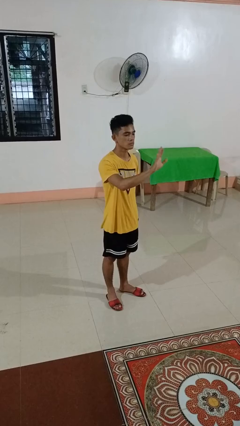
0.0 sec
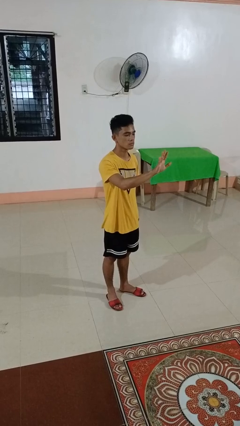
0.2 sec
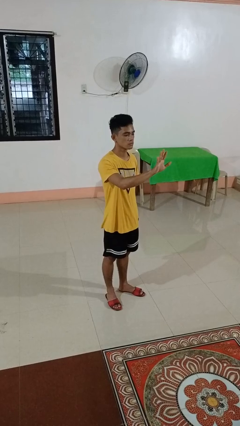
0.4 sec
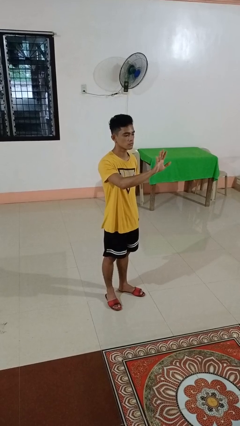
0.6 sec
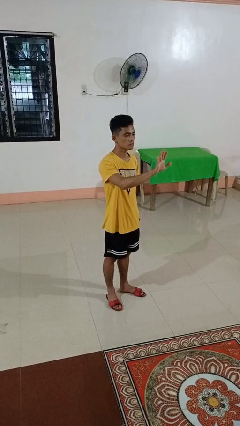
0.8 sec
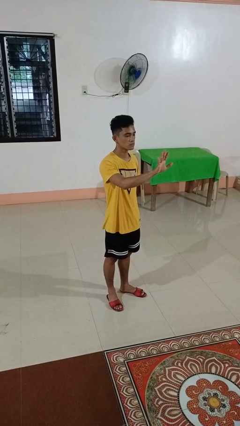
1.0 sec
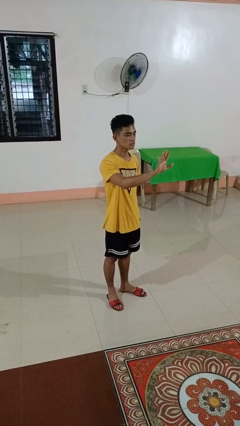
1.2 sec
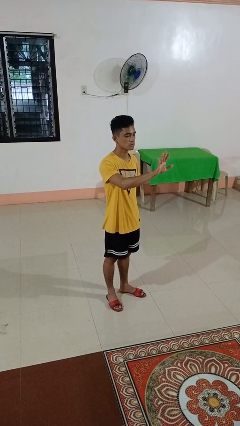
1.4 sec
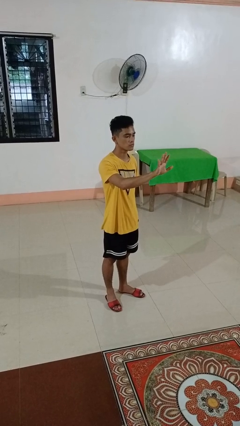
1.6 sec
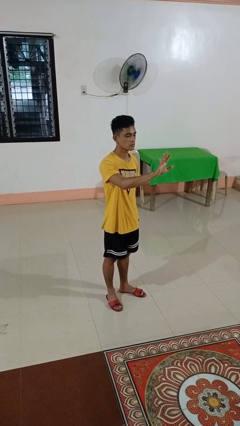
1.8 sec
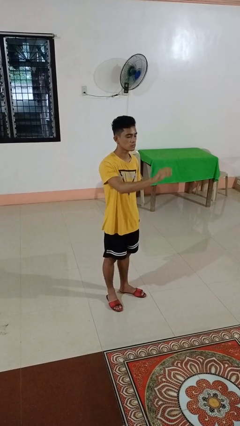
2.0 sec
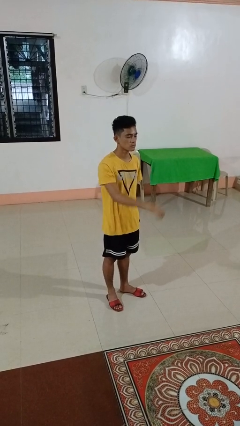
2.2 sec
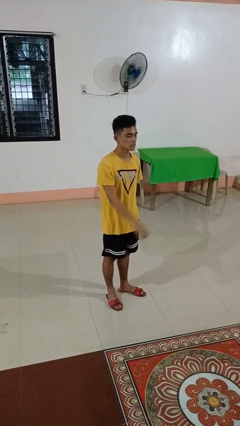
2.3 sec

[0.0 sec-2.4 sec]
person gestures number five

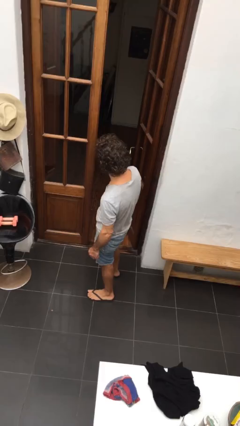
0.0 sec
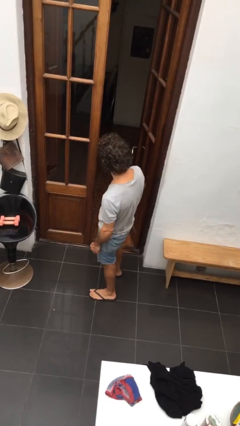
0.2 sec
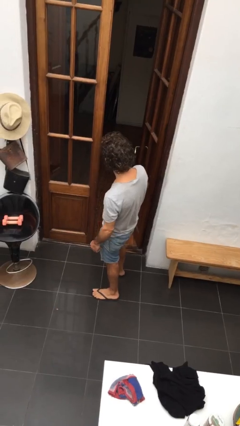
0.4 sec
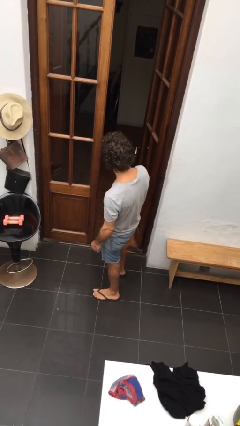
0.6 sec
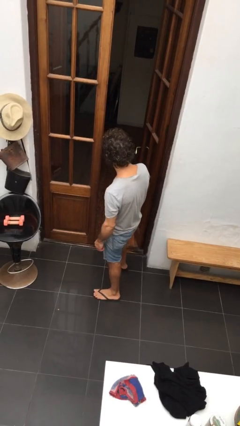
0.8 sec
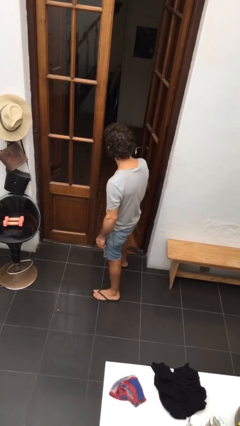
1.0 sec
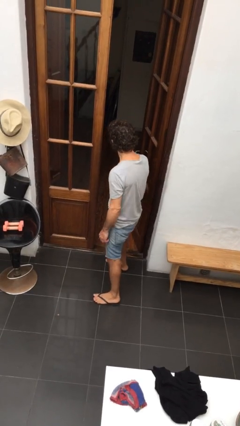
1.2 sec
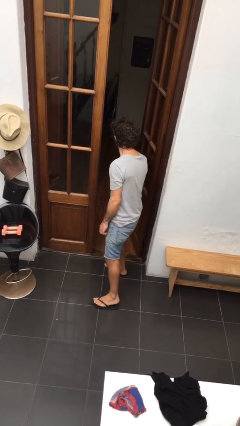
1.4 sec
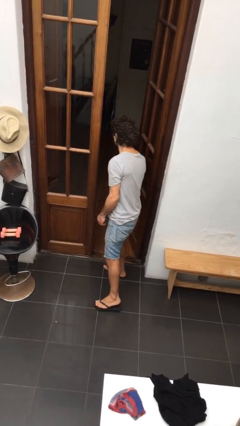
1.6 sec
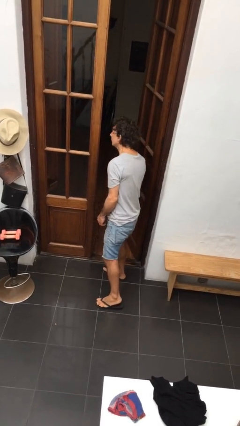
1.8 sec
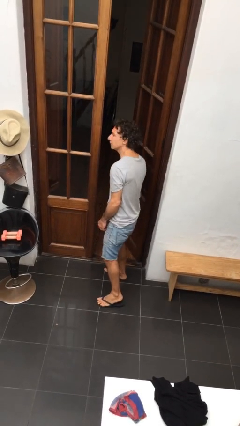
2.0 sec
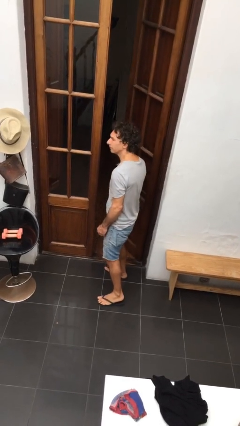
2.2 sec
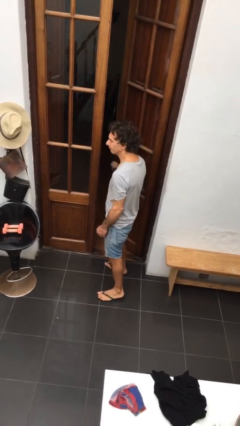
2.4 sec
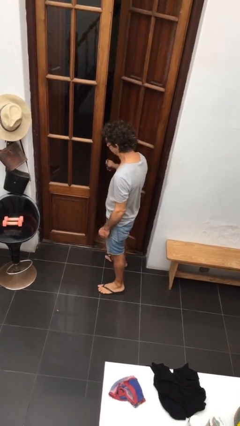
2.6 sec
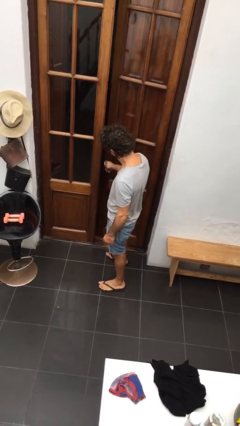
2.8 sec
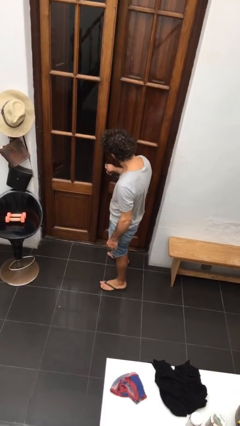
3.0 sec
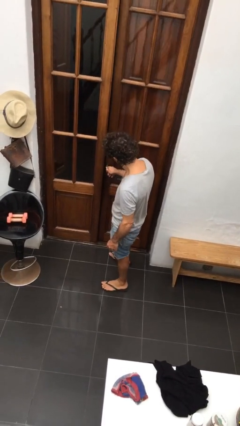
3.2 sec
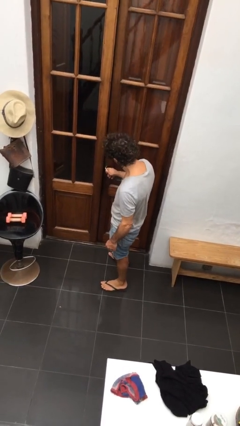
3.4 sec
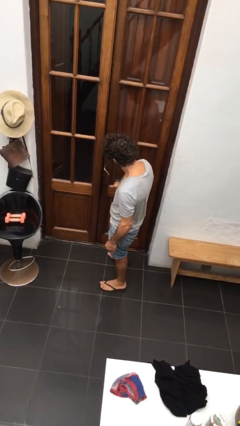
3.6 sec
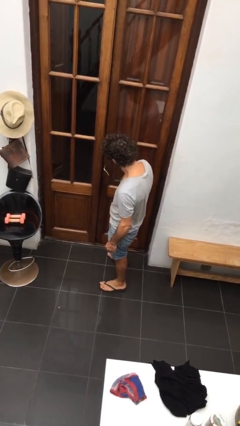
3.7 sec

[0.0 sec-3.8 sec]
person closes facility door

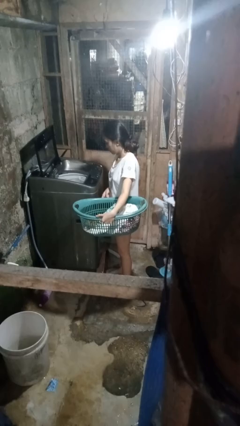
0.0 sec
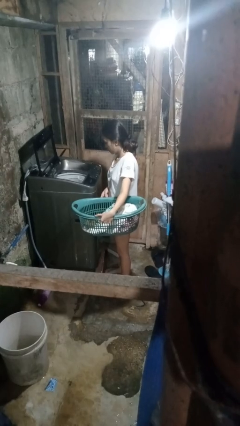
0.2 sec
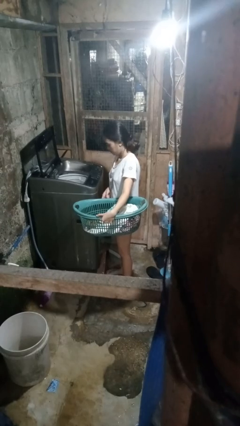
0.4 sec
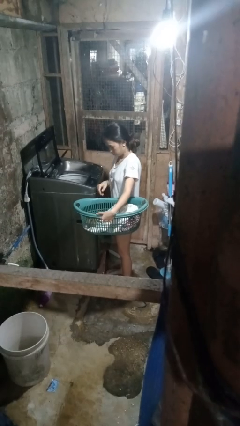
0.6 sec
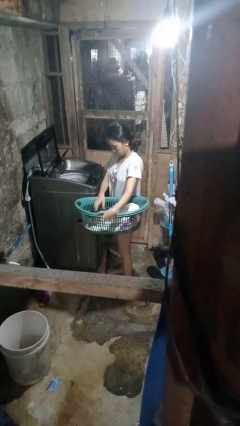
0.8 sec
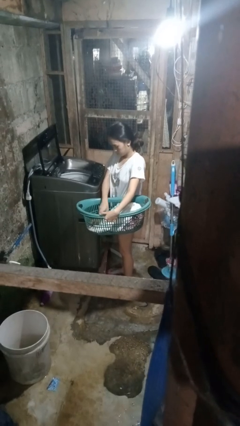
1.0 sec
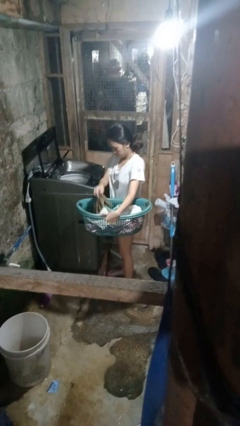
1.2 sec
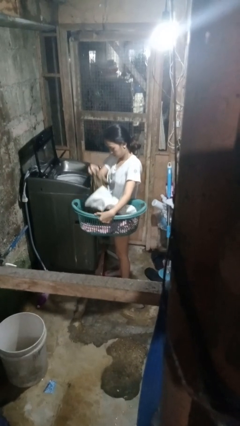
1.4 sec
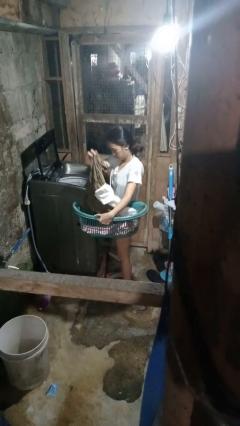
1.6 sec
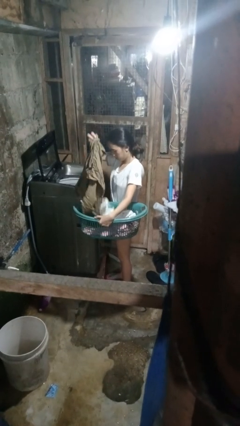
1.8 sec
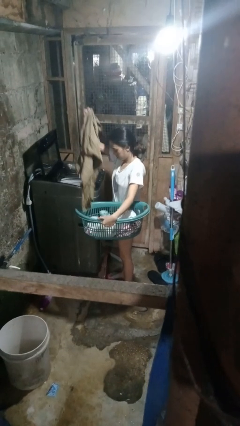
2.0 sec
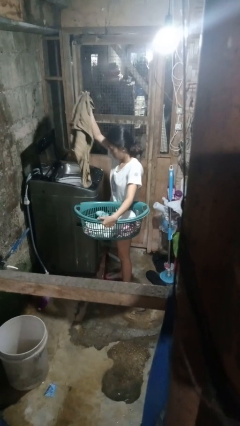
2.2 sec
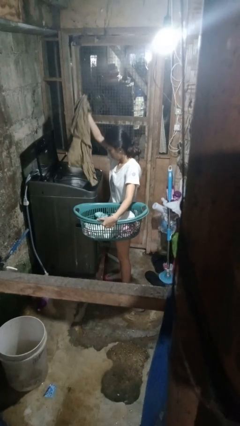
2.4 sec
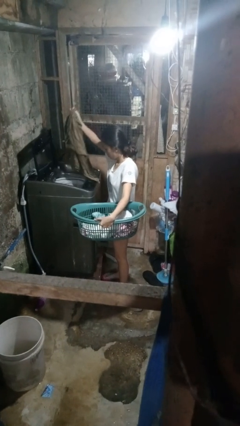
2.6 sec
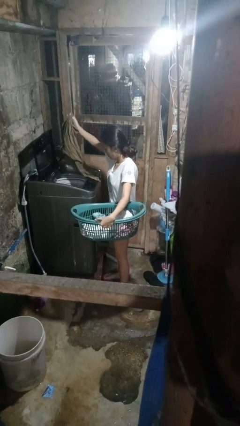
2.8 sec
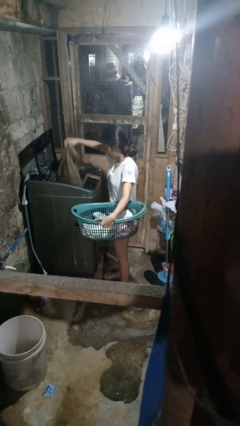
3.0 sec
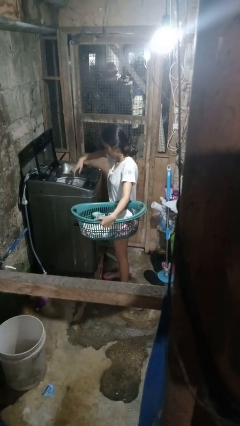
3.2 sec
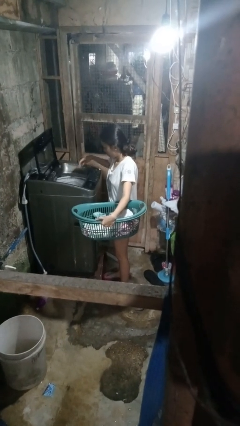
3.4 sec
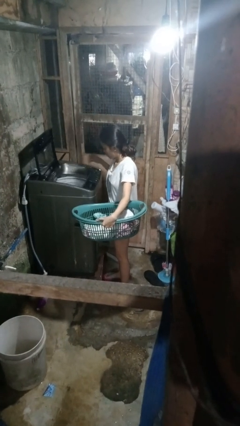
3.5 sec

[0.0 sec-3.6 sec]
person loads clotheswasher

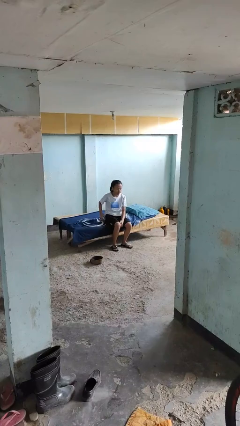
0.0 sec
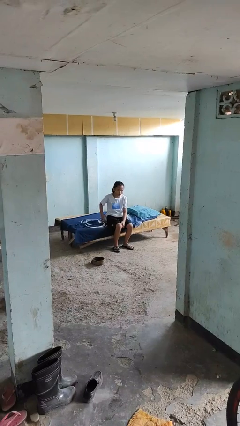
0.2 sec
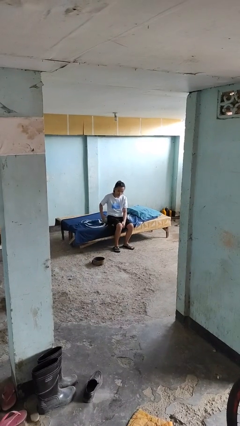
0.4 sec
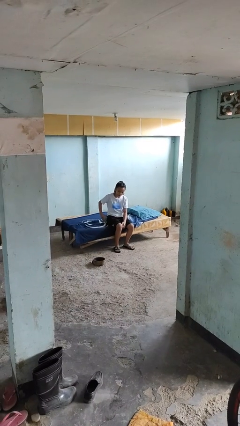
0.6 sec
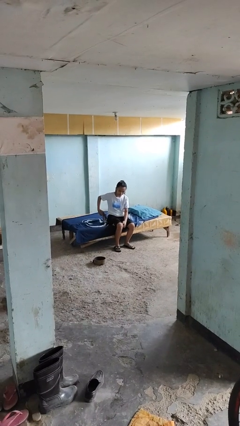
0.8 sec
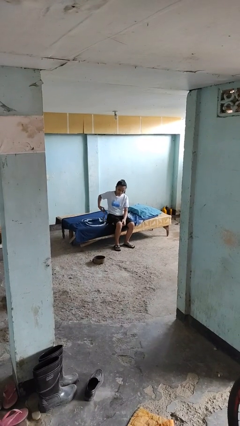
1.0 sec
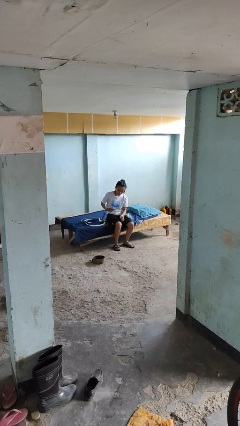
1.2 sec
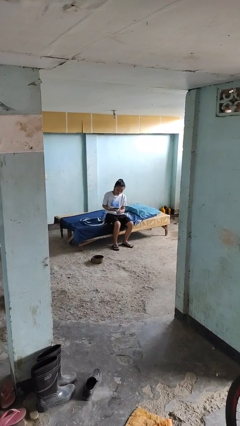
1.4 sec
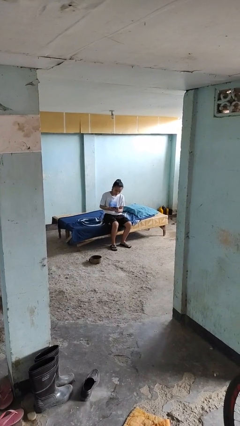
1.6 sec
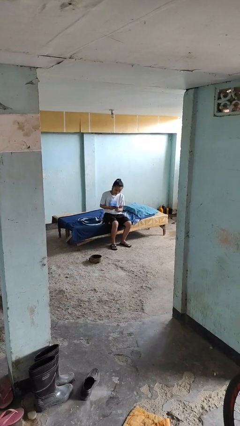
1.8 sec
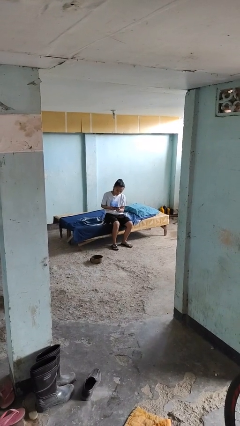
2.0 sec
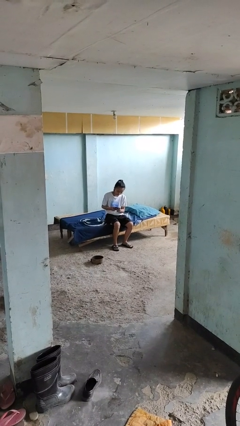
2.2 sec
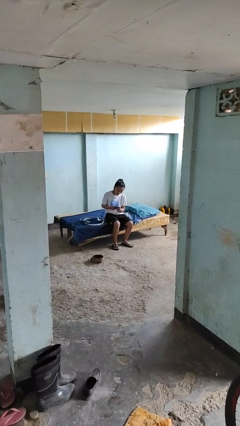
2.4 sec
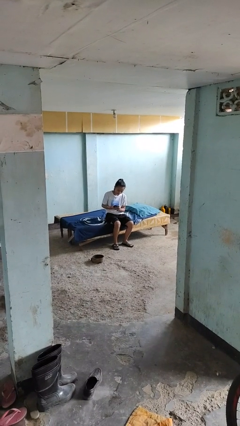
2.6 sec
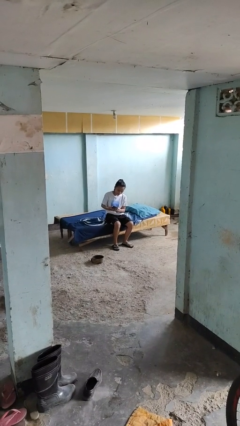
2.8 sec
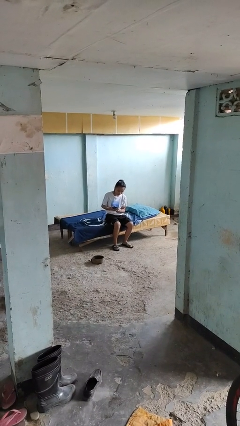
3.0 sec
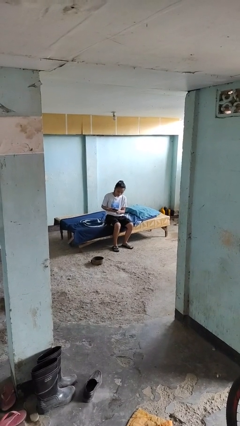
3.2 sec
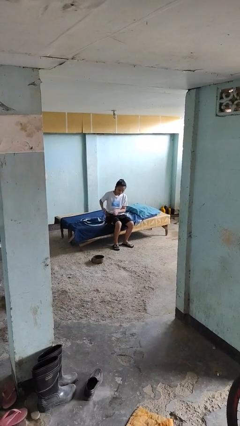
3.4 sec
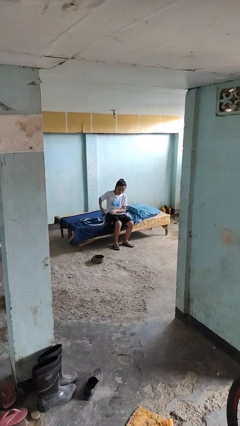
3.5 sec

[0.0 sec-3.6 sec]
person takes phone from pocket

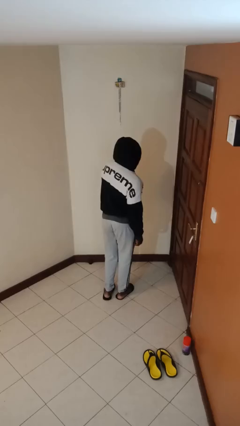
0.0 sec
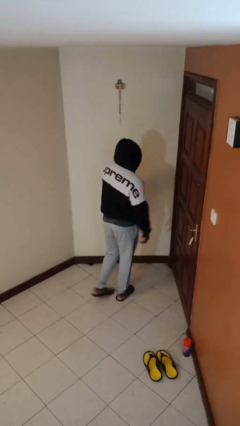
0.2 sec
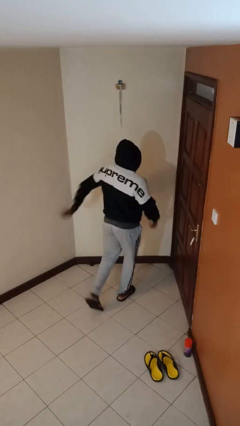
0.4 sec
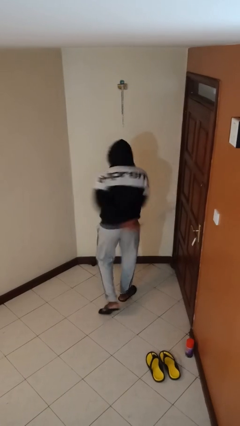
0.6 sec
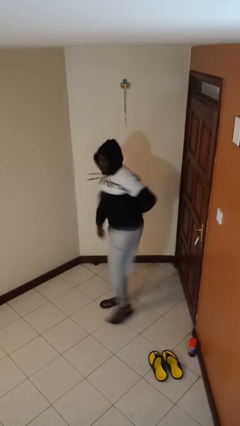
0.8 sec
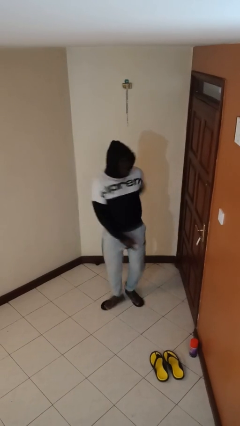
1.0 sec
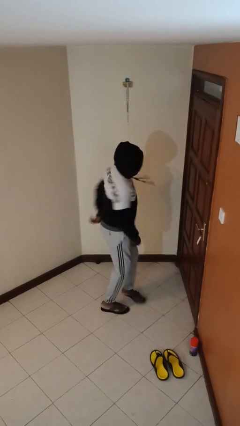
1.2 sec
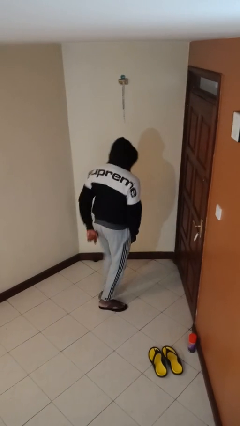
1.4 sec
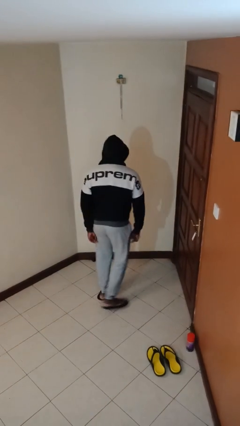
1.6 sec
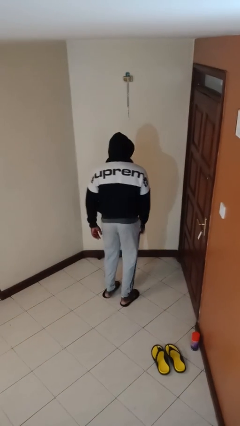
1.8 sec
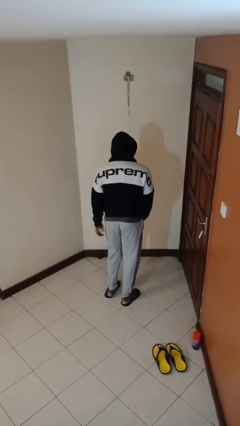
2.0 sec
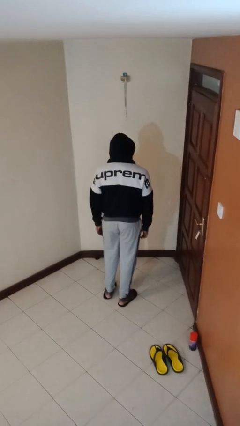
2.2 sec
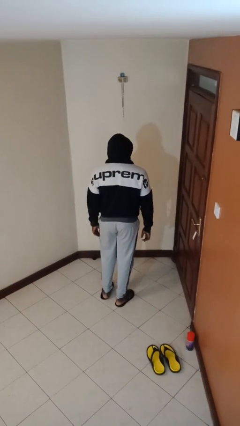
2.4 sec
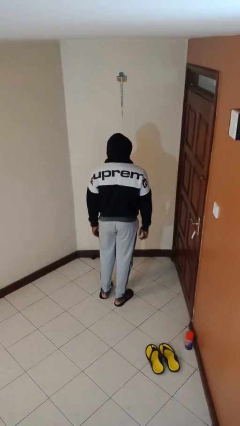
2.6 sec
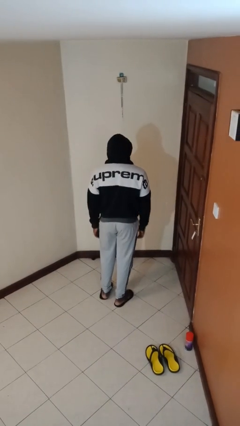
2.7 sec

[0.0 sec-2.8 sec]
person twirls

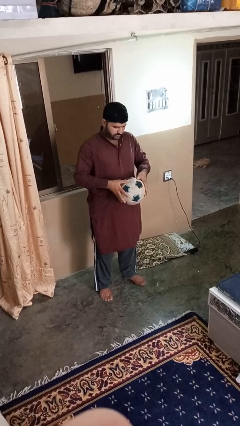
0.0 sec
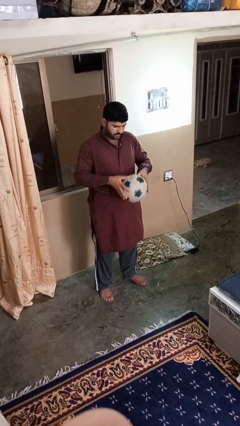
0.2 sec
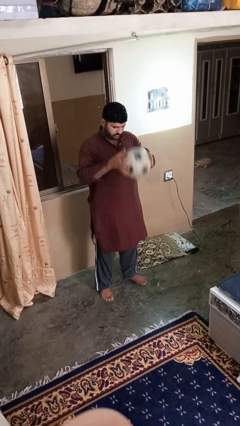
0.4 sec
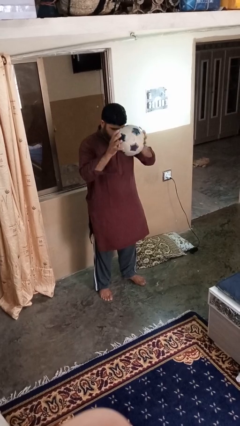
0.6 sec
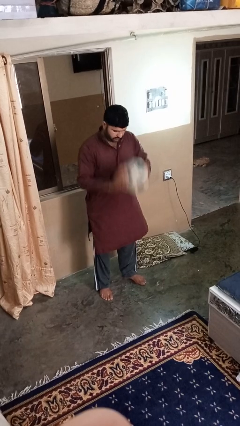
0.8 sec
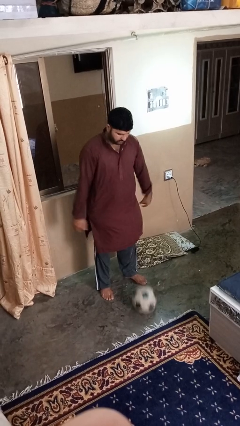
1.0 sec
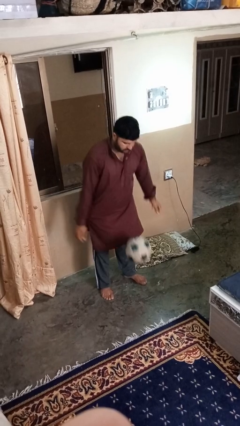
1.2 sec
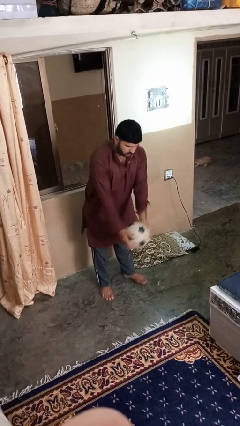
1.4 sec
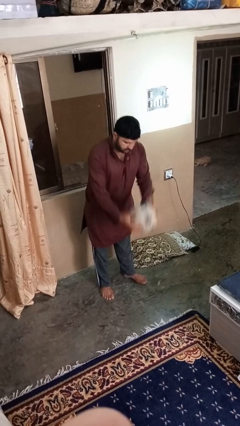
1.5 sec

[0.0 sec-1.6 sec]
person bounces ball on floor
